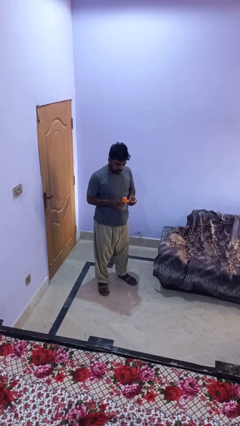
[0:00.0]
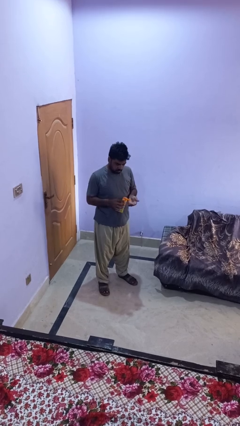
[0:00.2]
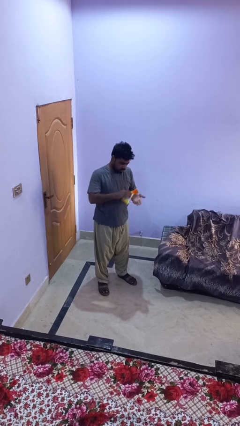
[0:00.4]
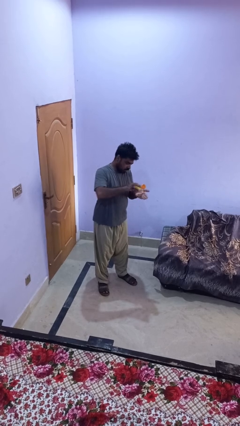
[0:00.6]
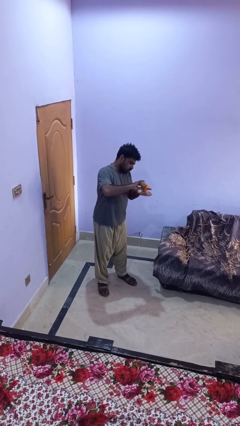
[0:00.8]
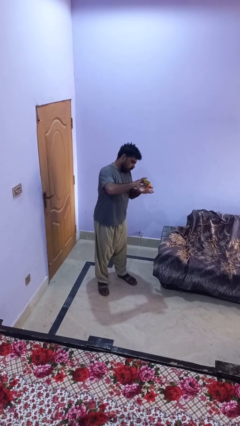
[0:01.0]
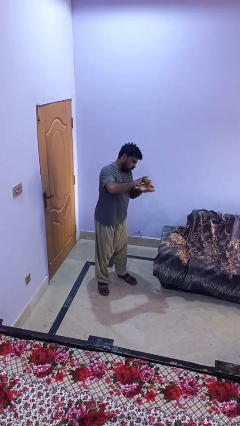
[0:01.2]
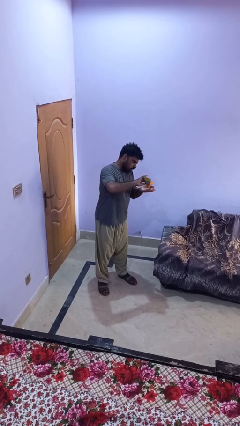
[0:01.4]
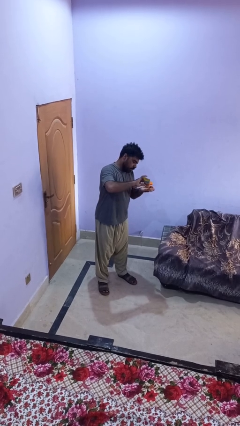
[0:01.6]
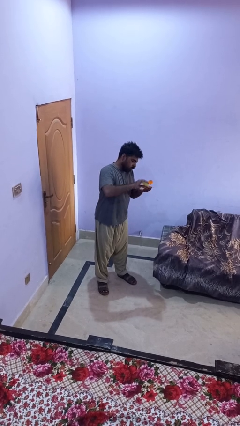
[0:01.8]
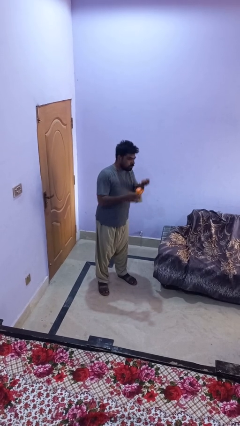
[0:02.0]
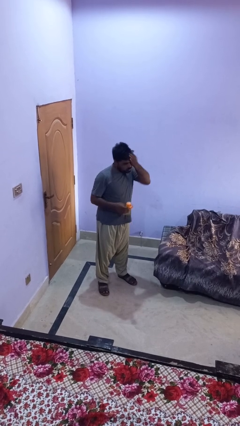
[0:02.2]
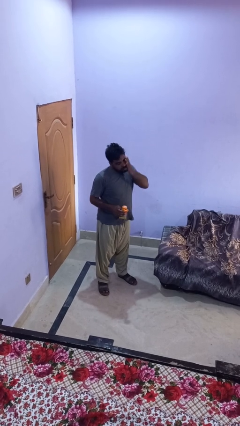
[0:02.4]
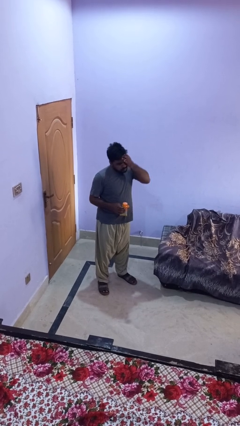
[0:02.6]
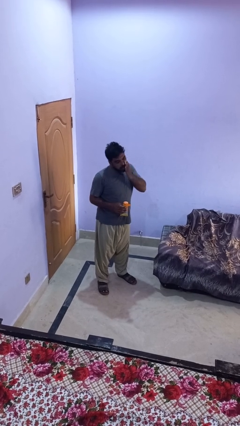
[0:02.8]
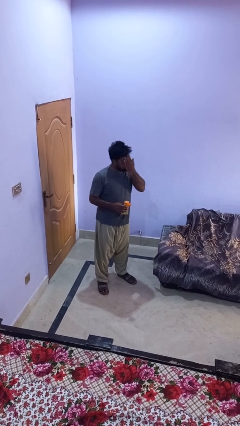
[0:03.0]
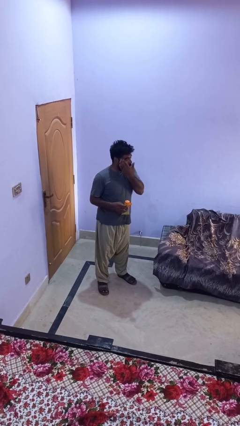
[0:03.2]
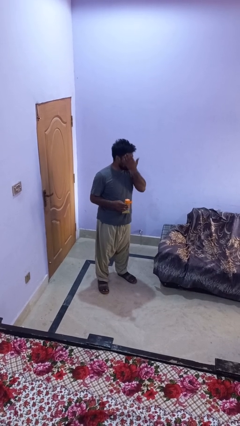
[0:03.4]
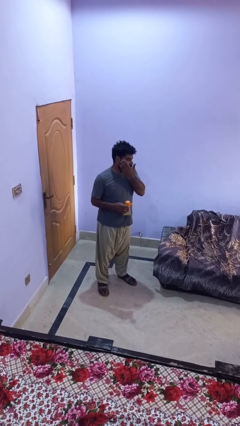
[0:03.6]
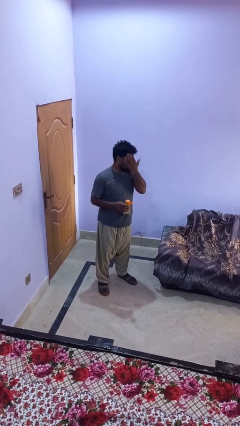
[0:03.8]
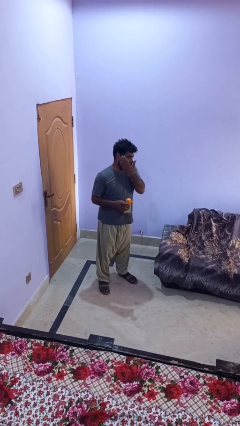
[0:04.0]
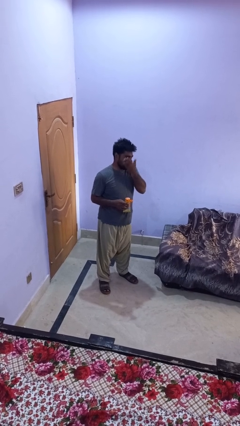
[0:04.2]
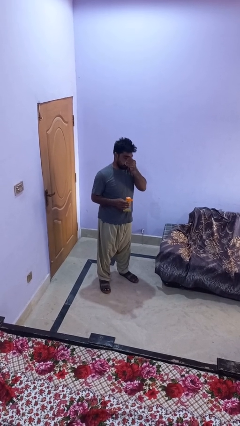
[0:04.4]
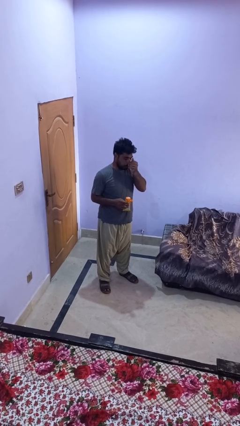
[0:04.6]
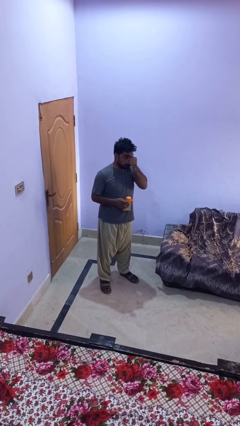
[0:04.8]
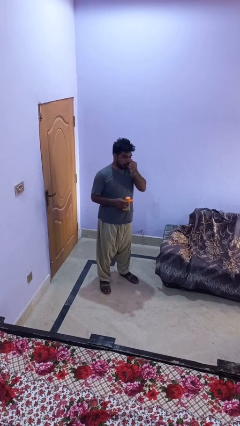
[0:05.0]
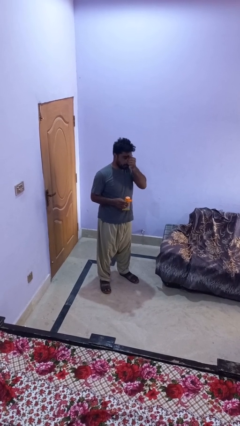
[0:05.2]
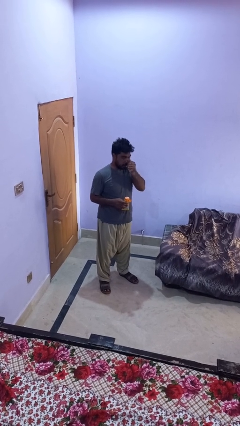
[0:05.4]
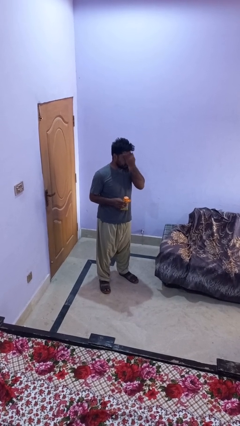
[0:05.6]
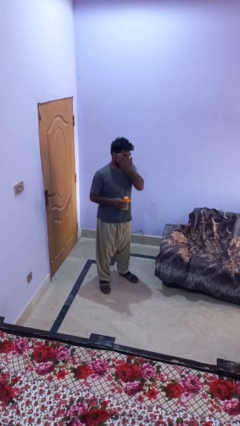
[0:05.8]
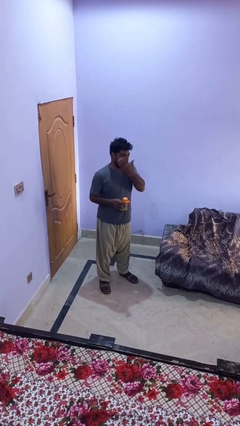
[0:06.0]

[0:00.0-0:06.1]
person applies facial moisturizer

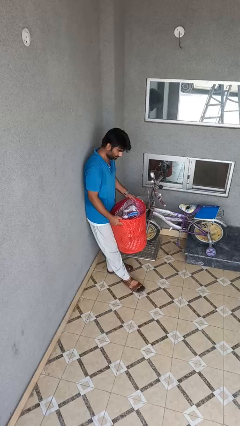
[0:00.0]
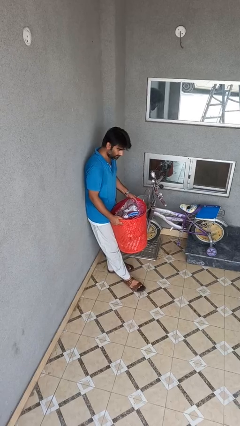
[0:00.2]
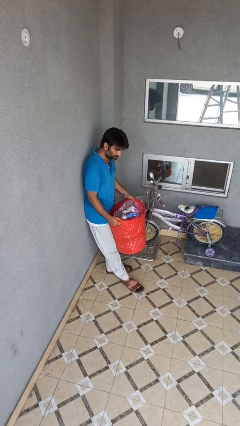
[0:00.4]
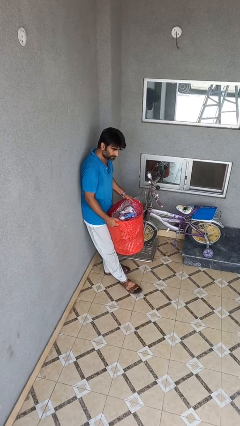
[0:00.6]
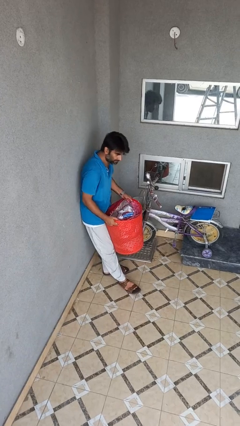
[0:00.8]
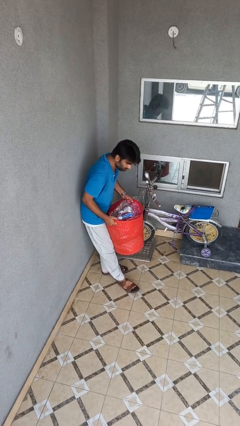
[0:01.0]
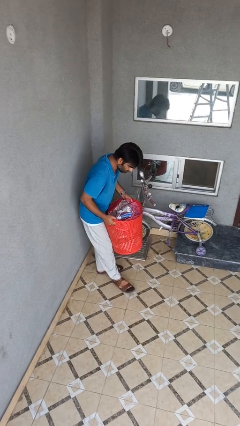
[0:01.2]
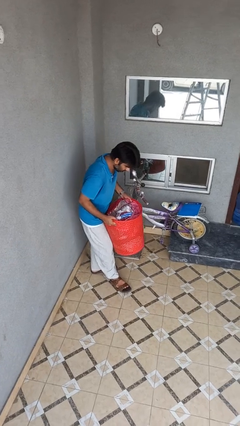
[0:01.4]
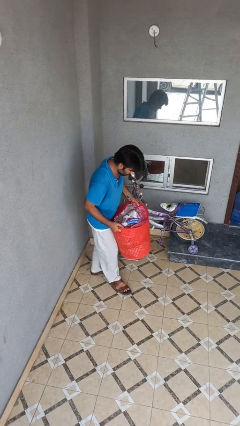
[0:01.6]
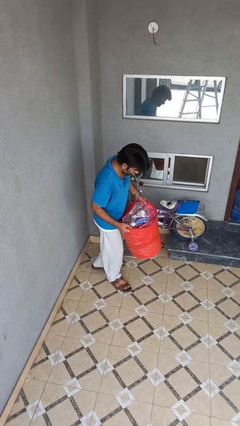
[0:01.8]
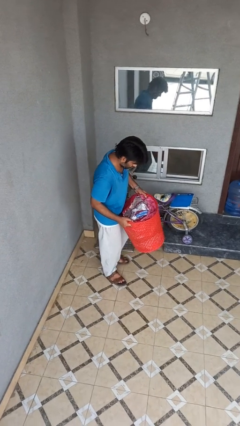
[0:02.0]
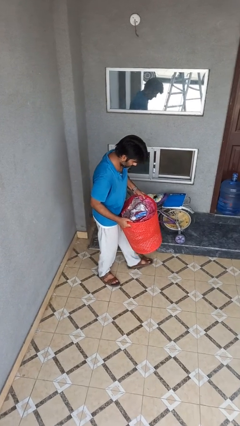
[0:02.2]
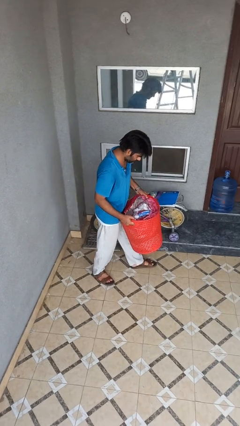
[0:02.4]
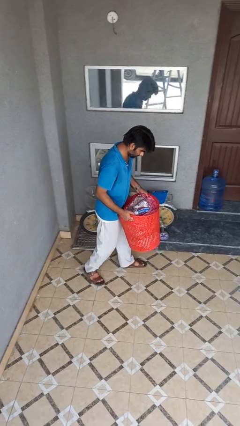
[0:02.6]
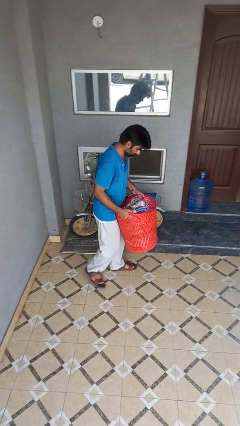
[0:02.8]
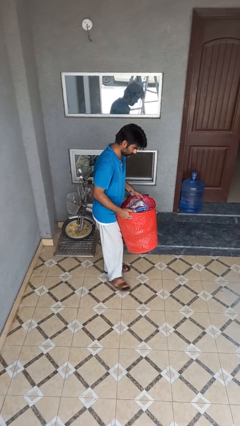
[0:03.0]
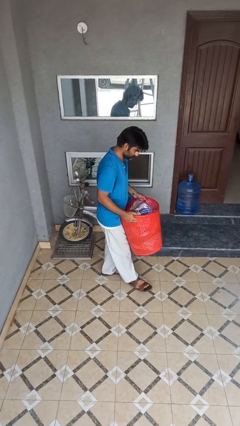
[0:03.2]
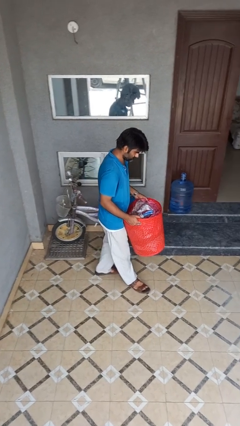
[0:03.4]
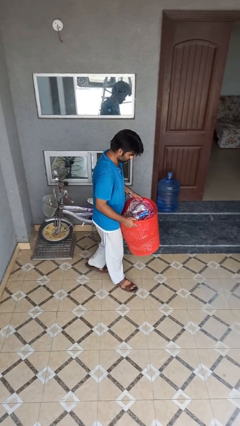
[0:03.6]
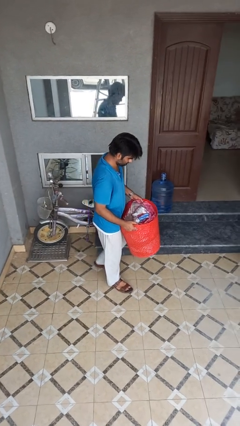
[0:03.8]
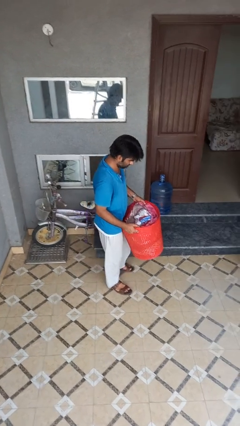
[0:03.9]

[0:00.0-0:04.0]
person carries laundry basket

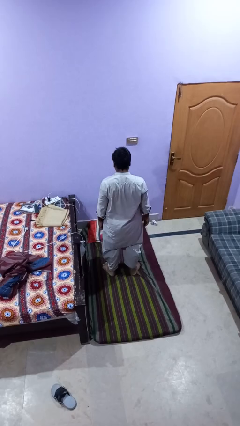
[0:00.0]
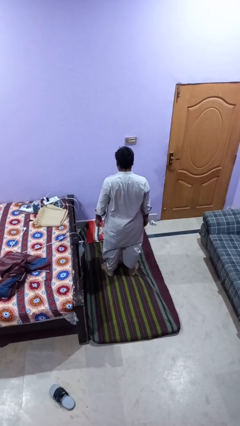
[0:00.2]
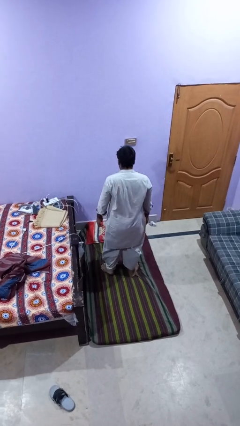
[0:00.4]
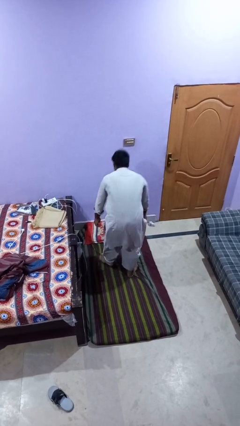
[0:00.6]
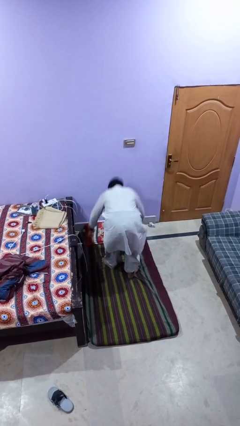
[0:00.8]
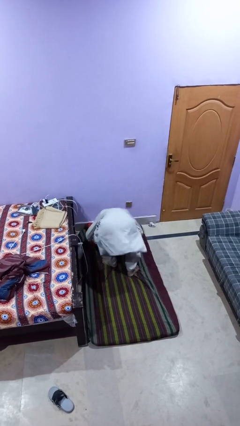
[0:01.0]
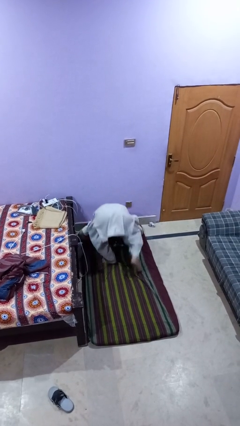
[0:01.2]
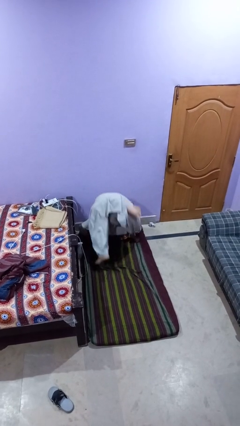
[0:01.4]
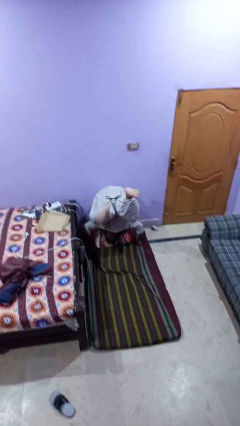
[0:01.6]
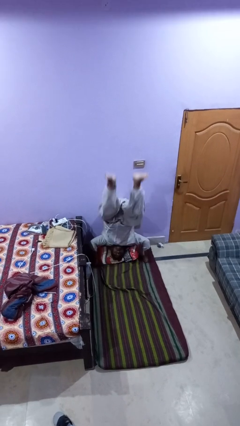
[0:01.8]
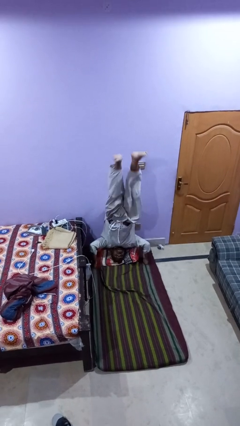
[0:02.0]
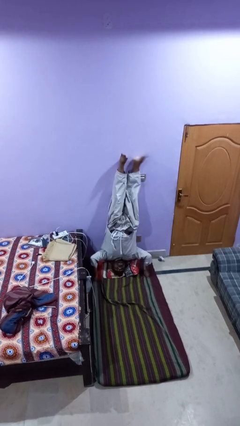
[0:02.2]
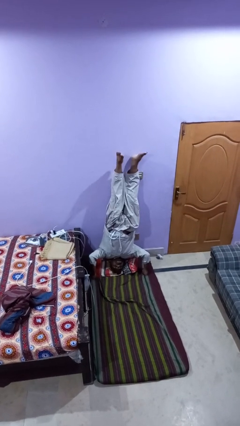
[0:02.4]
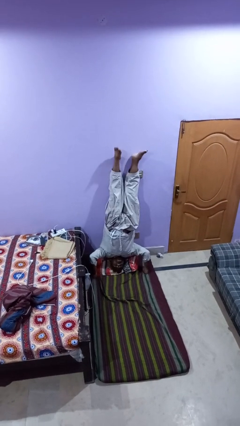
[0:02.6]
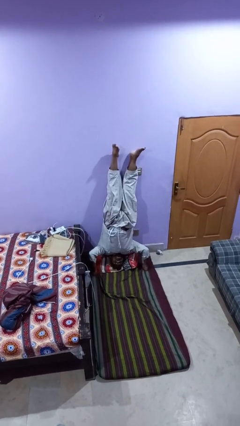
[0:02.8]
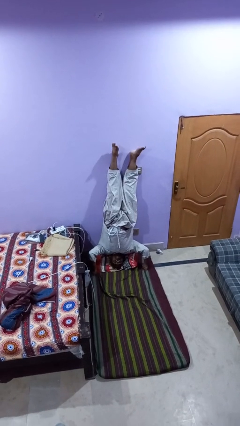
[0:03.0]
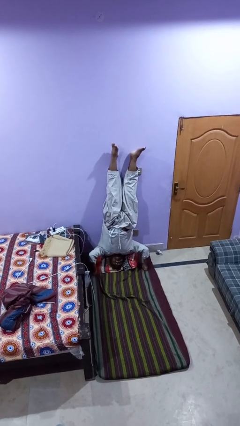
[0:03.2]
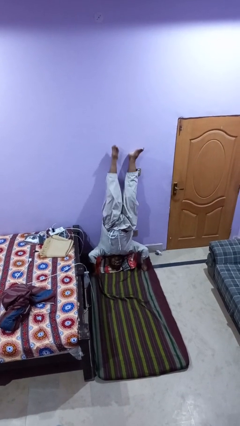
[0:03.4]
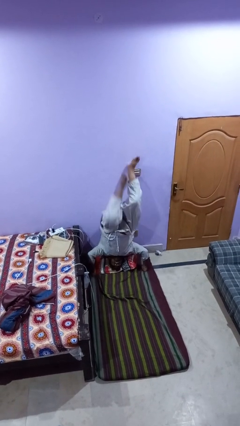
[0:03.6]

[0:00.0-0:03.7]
person handstand

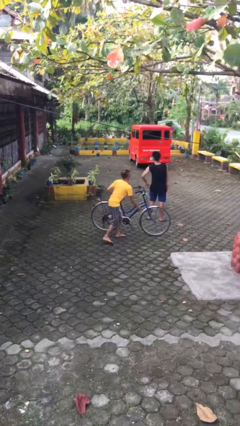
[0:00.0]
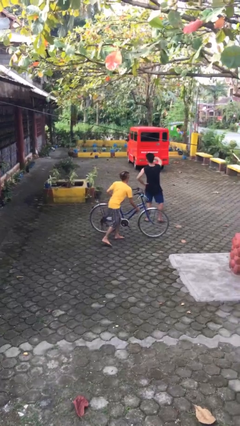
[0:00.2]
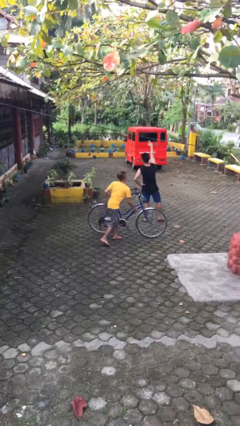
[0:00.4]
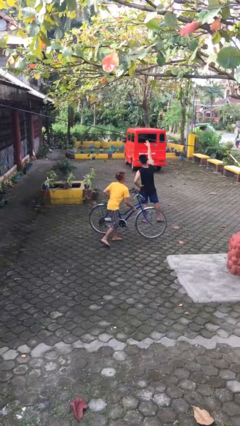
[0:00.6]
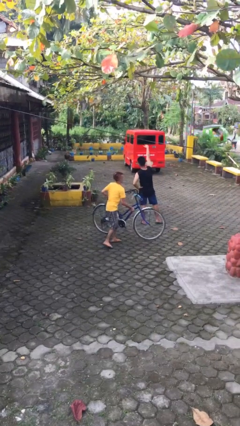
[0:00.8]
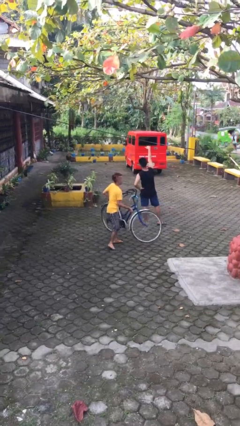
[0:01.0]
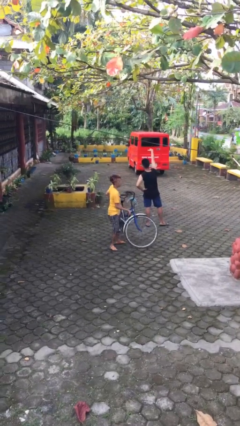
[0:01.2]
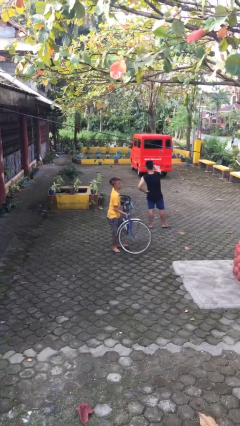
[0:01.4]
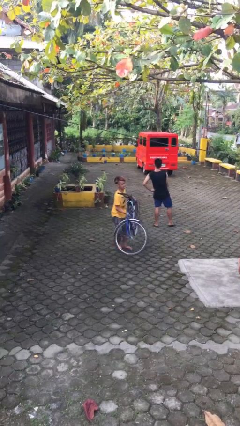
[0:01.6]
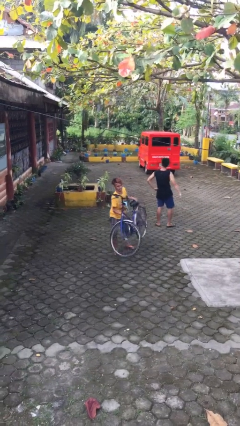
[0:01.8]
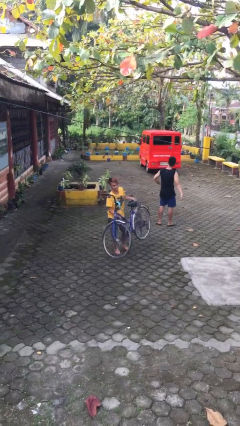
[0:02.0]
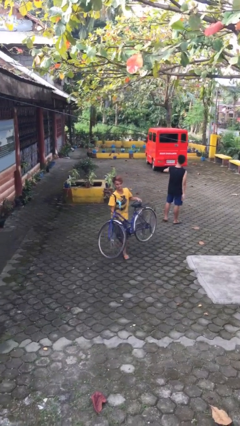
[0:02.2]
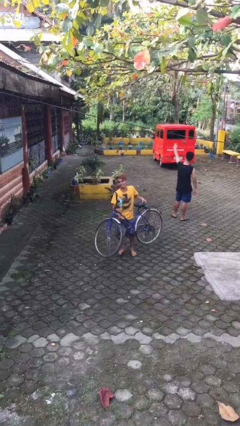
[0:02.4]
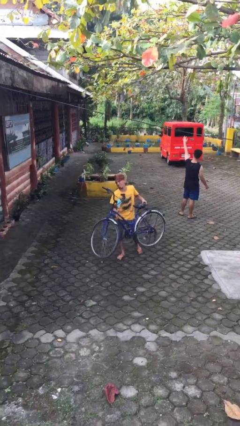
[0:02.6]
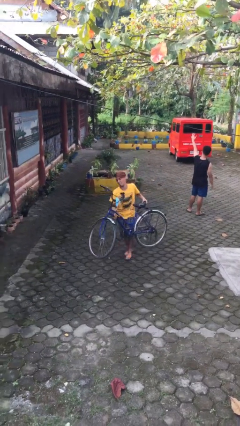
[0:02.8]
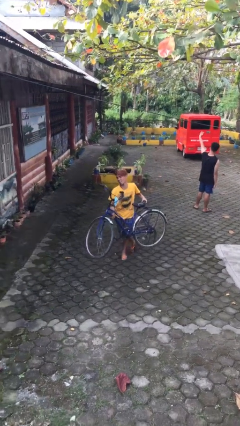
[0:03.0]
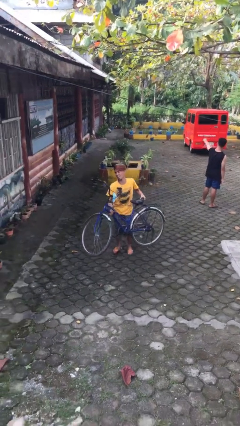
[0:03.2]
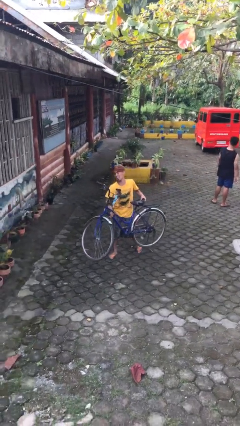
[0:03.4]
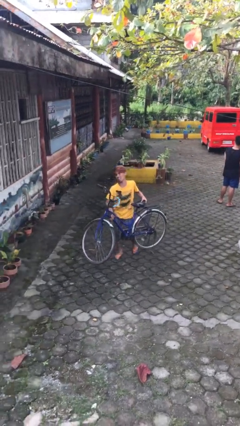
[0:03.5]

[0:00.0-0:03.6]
person steals object from person

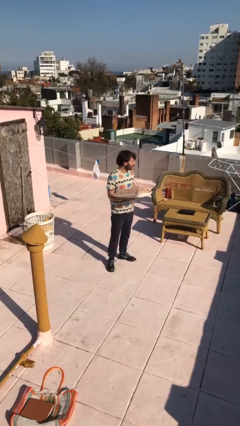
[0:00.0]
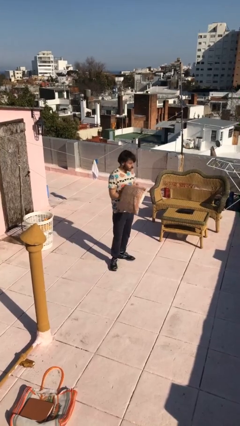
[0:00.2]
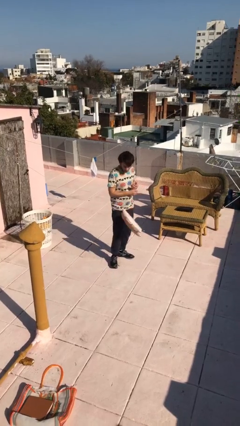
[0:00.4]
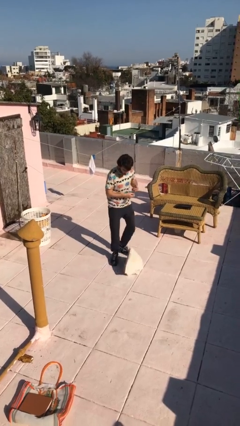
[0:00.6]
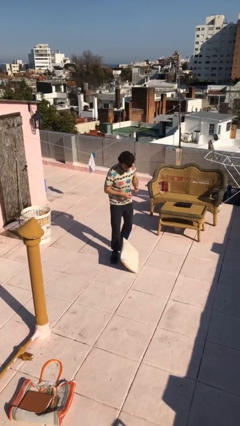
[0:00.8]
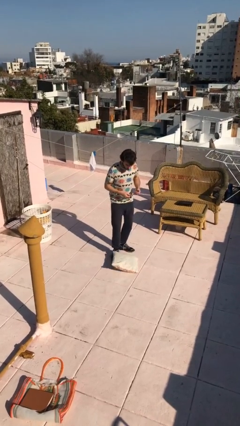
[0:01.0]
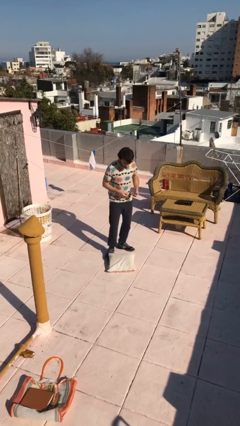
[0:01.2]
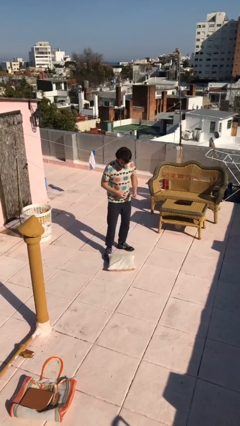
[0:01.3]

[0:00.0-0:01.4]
person drops object
